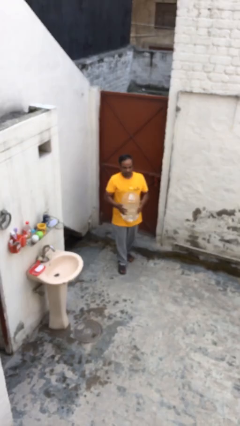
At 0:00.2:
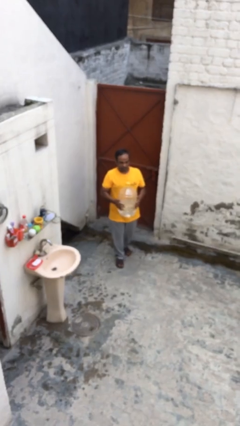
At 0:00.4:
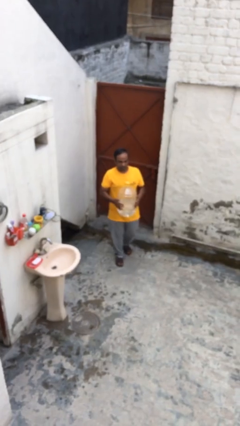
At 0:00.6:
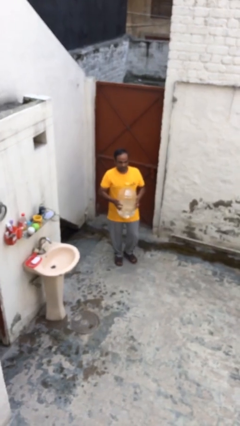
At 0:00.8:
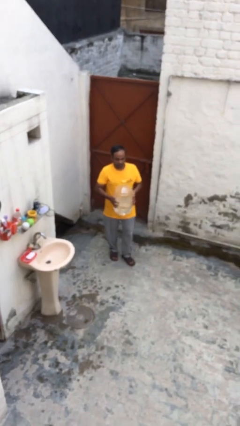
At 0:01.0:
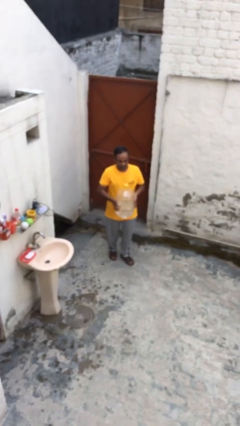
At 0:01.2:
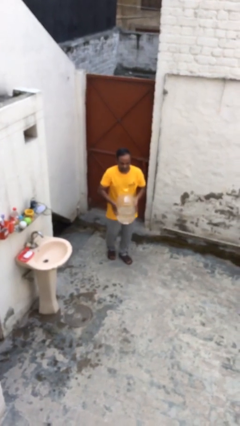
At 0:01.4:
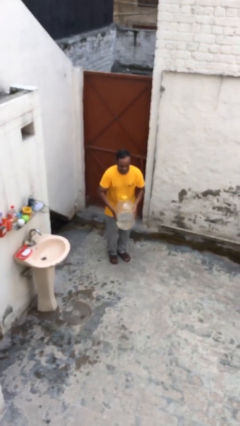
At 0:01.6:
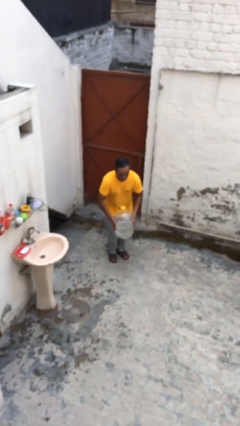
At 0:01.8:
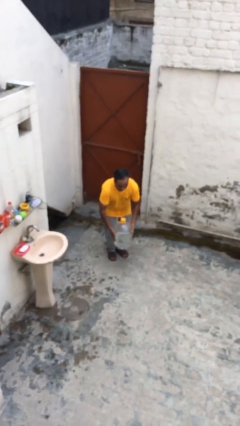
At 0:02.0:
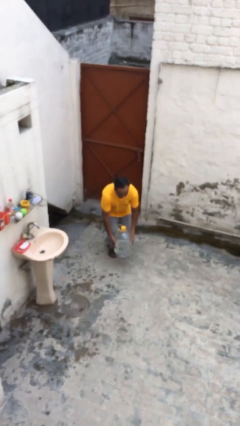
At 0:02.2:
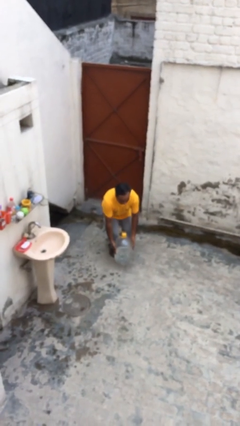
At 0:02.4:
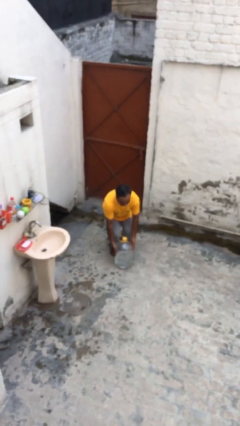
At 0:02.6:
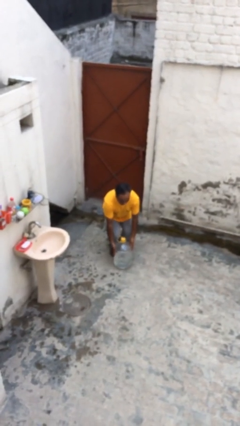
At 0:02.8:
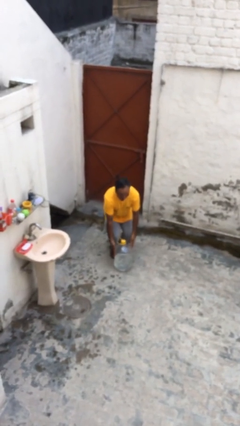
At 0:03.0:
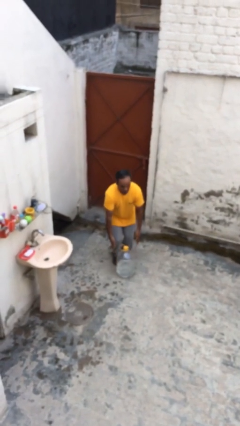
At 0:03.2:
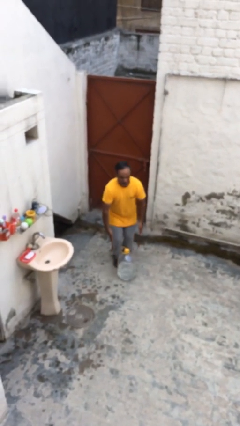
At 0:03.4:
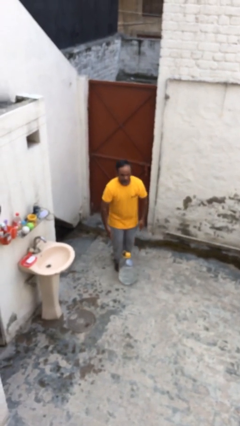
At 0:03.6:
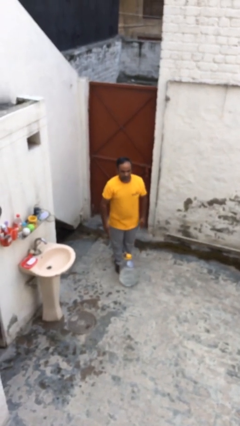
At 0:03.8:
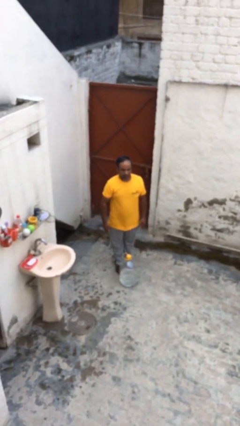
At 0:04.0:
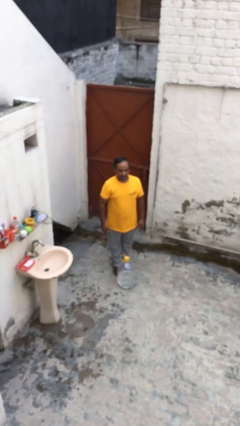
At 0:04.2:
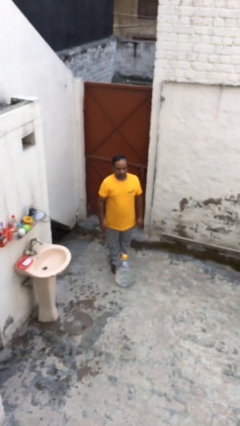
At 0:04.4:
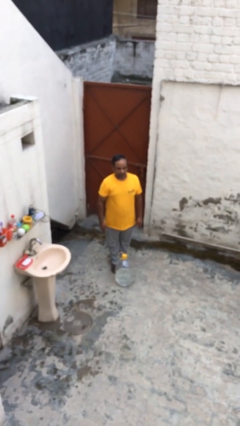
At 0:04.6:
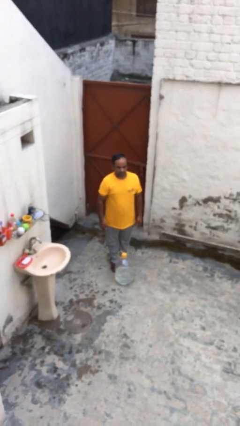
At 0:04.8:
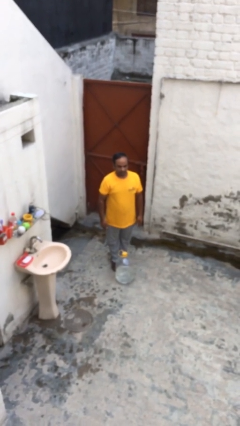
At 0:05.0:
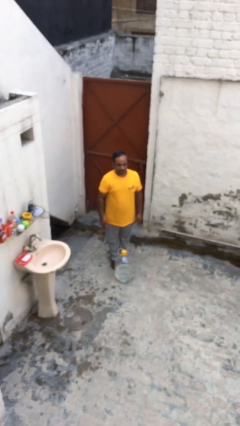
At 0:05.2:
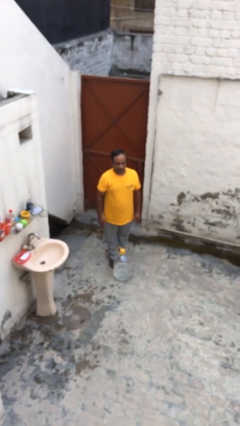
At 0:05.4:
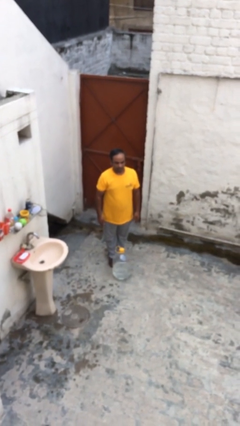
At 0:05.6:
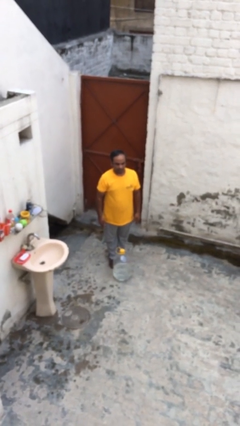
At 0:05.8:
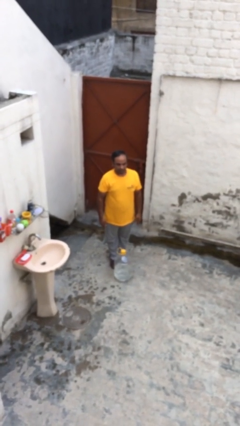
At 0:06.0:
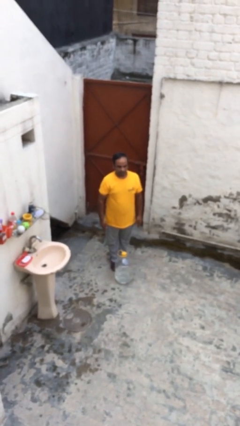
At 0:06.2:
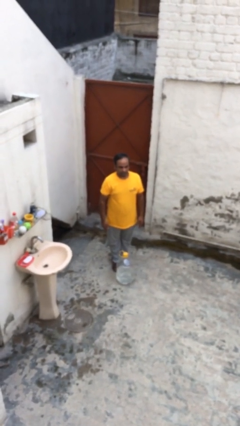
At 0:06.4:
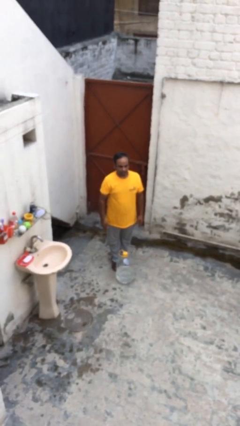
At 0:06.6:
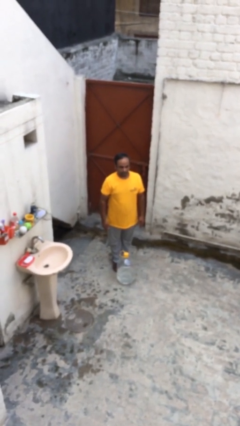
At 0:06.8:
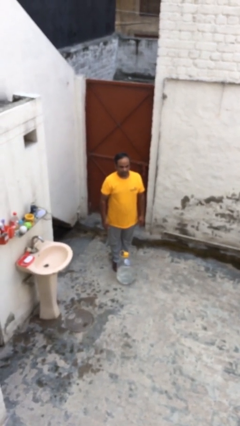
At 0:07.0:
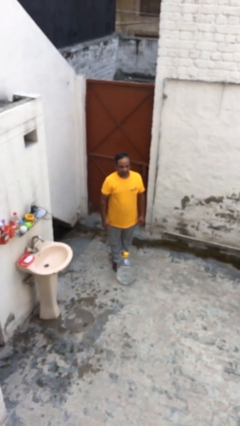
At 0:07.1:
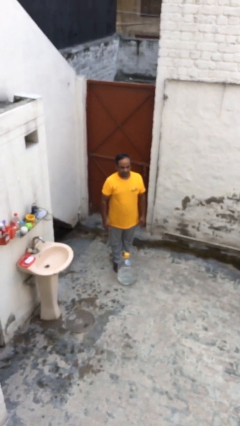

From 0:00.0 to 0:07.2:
person puts down object on floor

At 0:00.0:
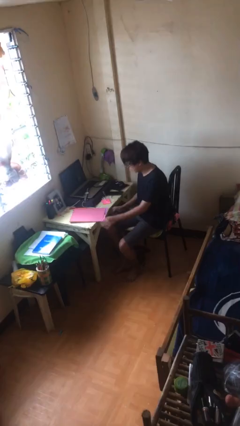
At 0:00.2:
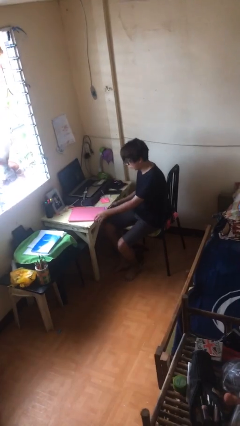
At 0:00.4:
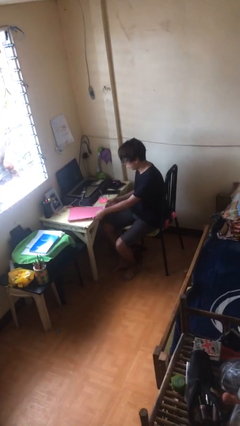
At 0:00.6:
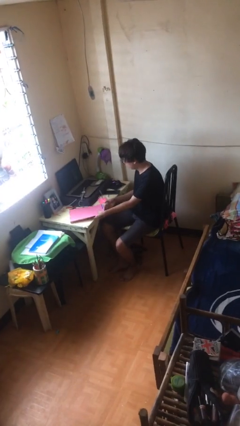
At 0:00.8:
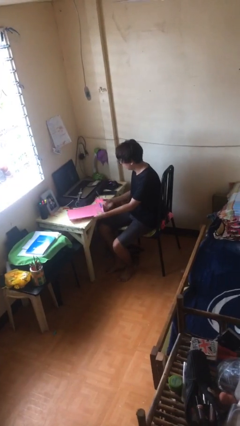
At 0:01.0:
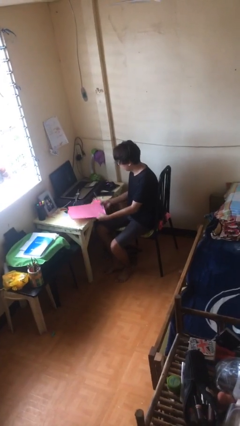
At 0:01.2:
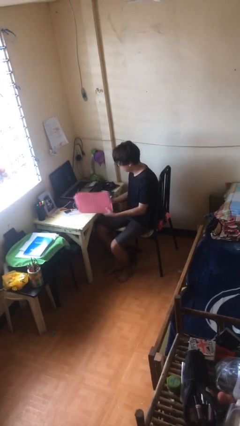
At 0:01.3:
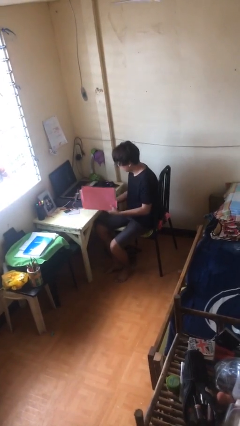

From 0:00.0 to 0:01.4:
person sits down

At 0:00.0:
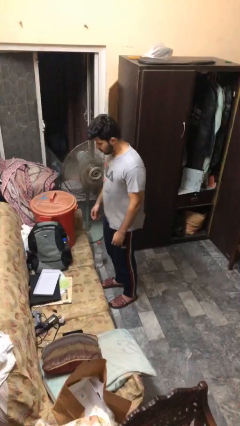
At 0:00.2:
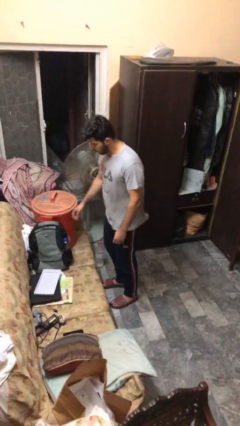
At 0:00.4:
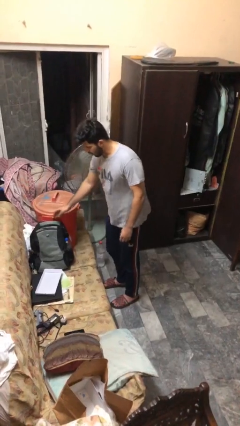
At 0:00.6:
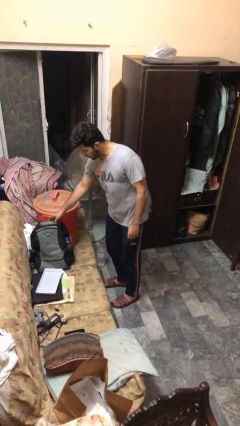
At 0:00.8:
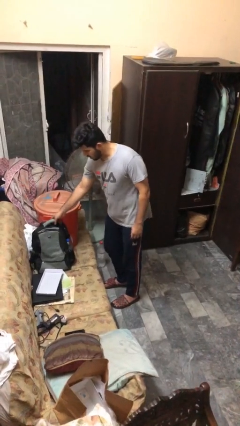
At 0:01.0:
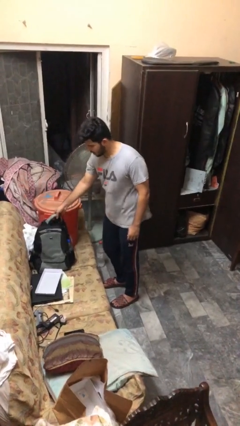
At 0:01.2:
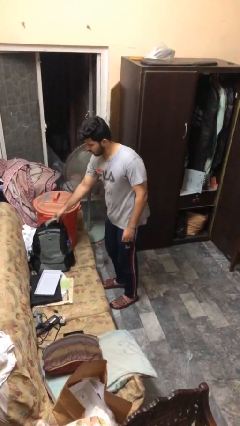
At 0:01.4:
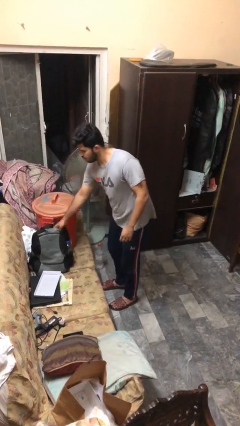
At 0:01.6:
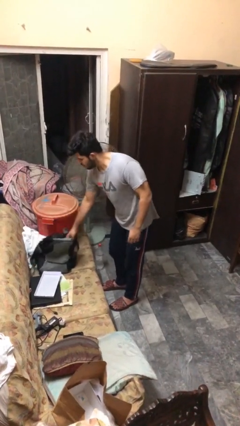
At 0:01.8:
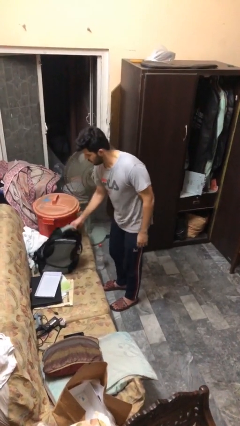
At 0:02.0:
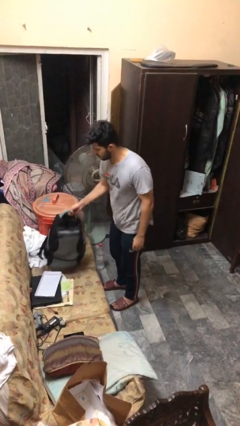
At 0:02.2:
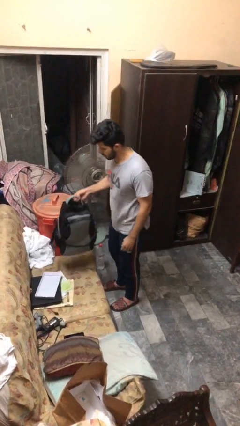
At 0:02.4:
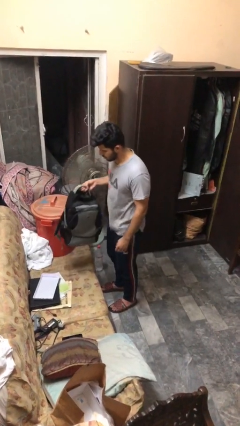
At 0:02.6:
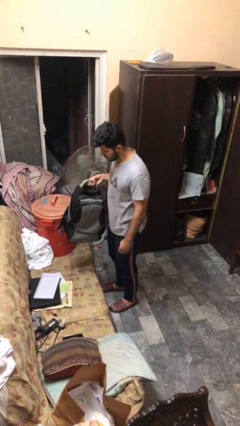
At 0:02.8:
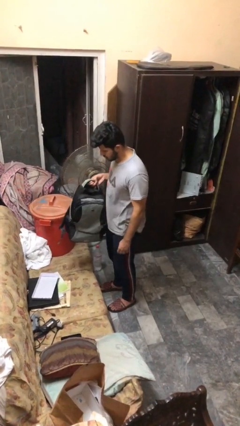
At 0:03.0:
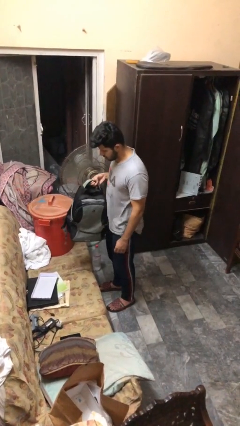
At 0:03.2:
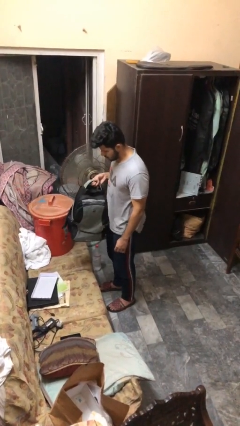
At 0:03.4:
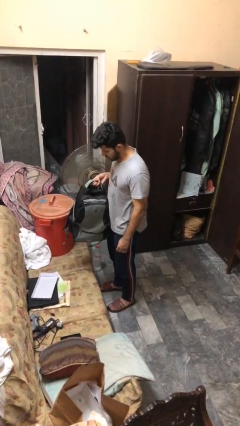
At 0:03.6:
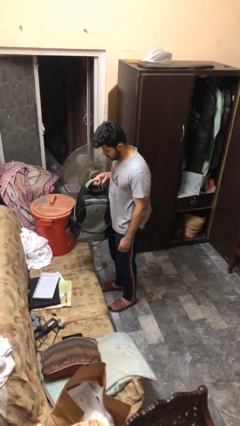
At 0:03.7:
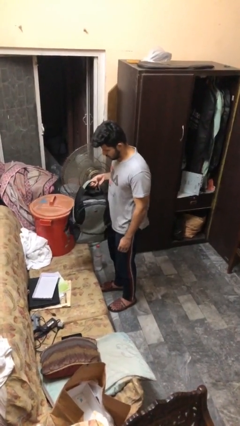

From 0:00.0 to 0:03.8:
person picks up object from couch

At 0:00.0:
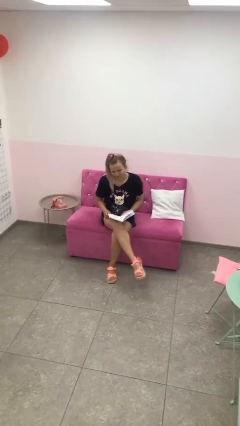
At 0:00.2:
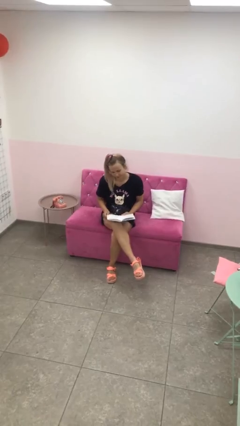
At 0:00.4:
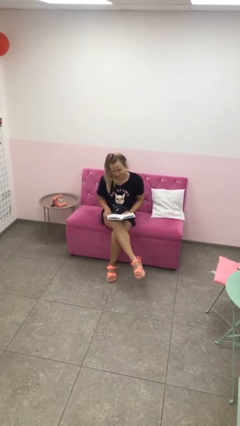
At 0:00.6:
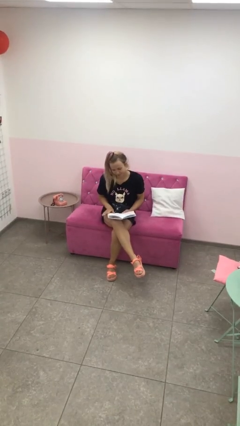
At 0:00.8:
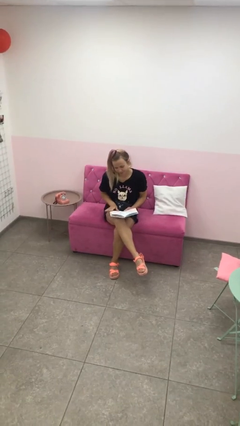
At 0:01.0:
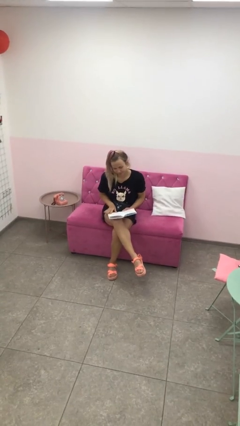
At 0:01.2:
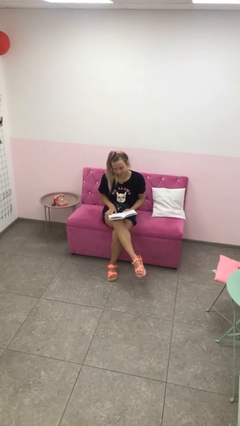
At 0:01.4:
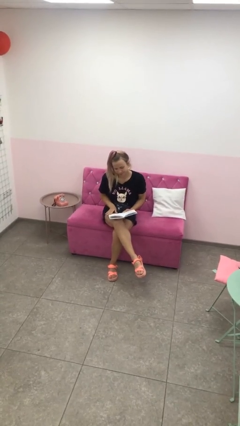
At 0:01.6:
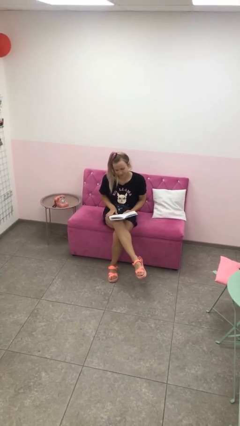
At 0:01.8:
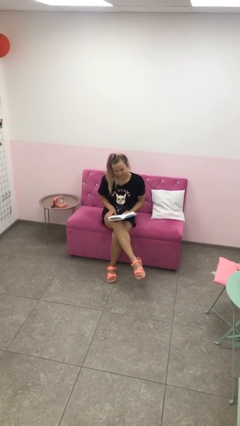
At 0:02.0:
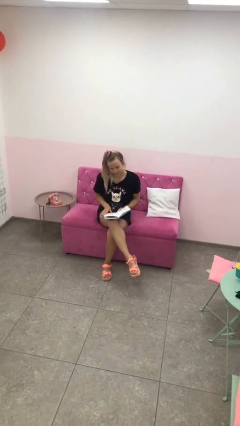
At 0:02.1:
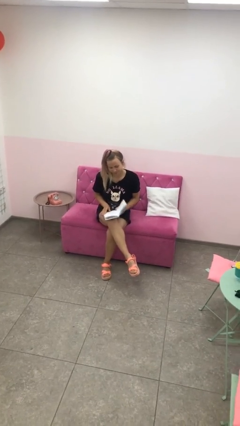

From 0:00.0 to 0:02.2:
person reads book

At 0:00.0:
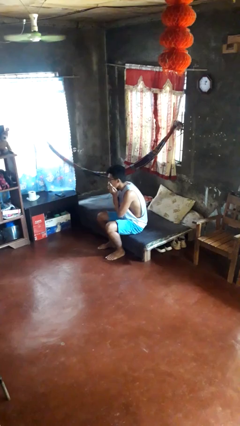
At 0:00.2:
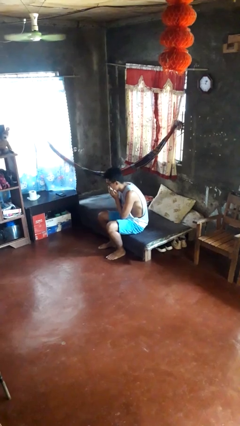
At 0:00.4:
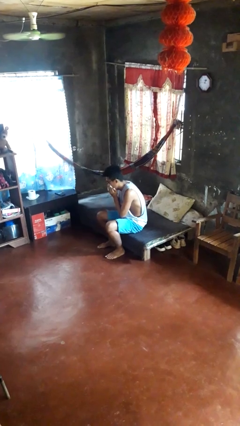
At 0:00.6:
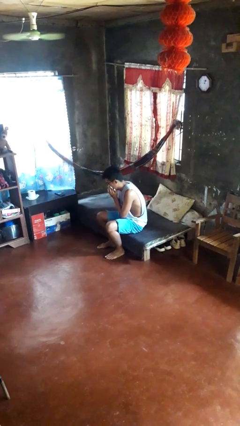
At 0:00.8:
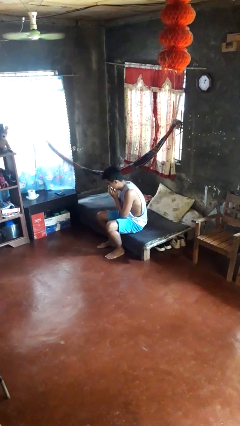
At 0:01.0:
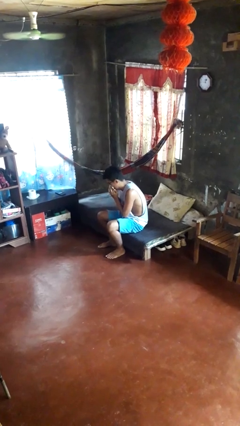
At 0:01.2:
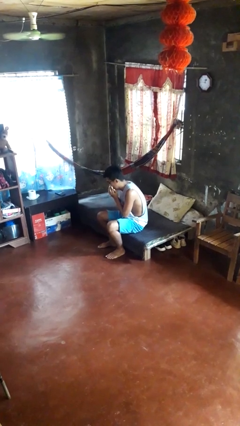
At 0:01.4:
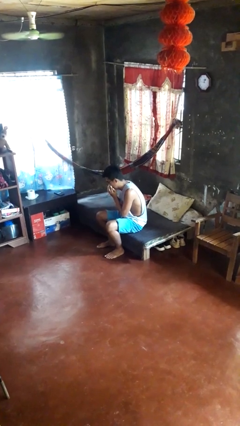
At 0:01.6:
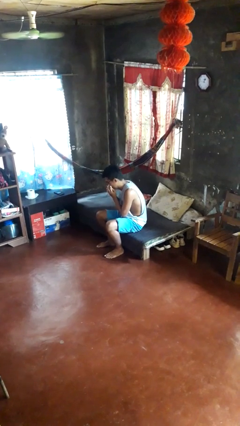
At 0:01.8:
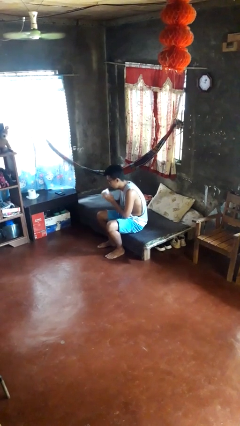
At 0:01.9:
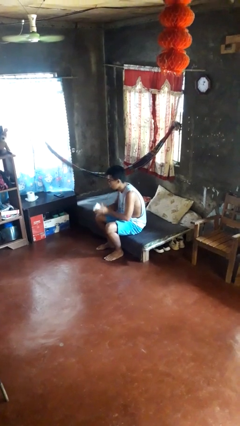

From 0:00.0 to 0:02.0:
person blows nose

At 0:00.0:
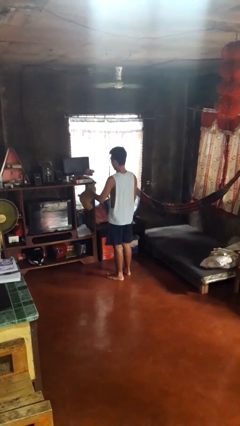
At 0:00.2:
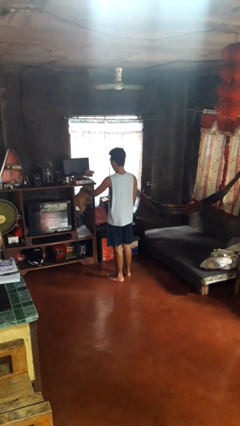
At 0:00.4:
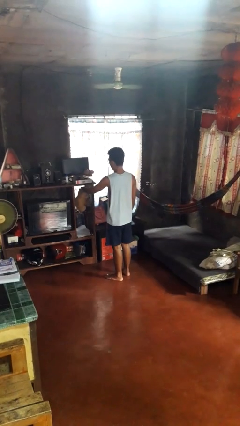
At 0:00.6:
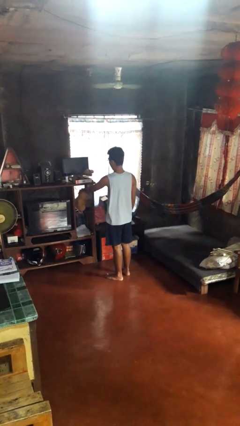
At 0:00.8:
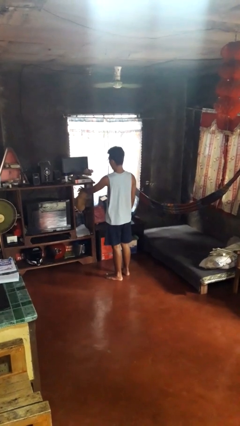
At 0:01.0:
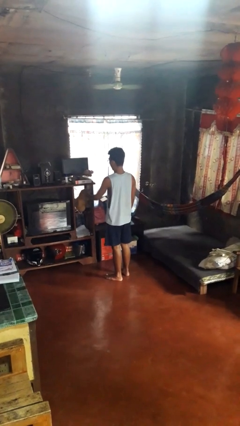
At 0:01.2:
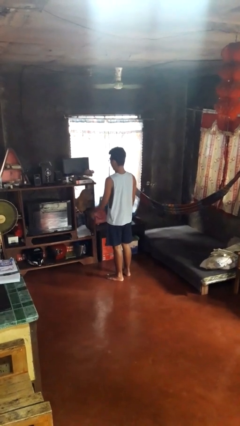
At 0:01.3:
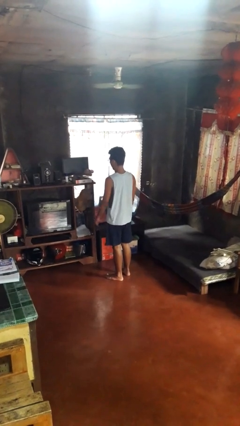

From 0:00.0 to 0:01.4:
person puts down object into cabinet
